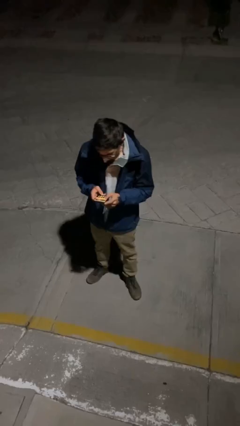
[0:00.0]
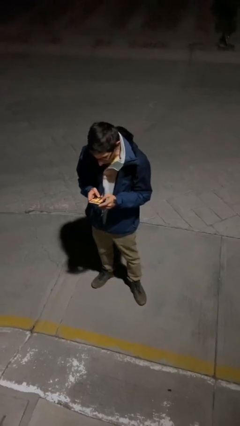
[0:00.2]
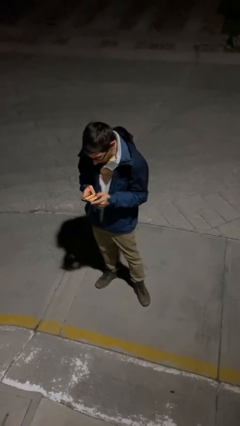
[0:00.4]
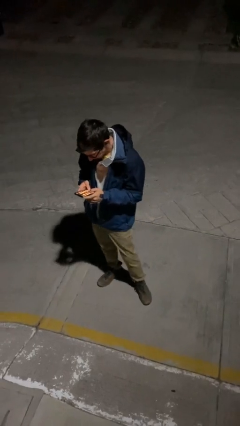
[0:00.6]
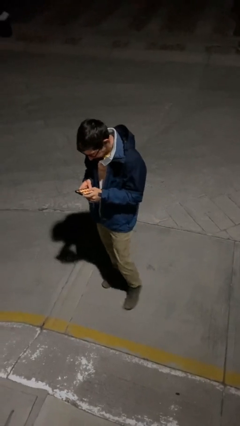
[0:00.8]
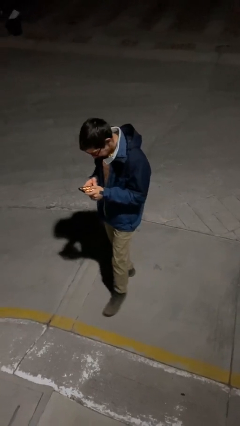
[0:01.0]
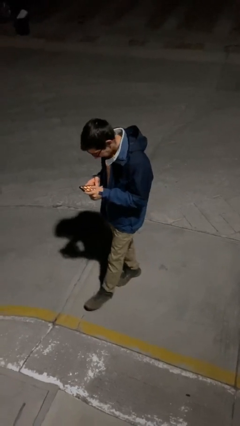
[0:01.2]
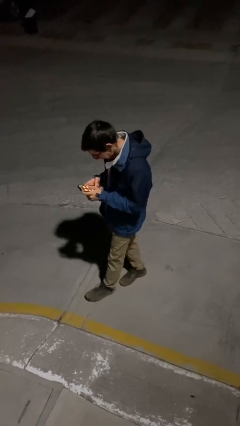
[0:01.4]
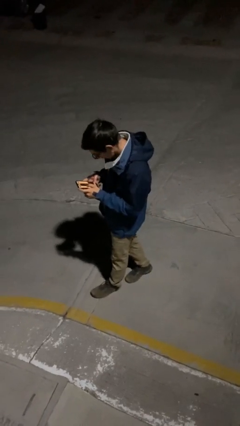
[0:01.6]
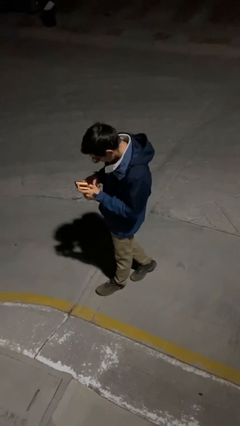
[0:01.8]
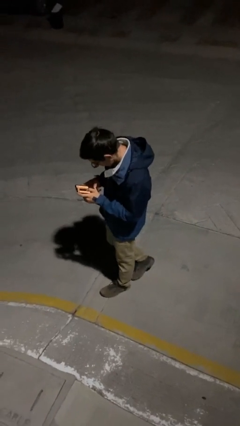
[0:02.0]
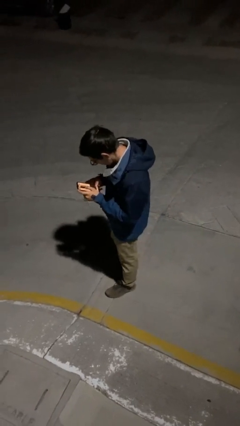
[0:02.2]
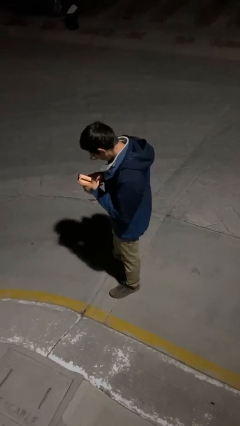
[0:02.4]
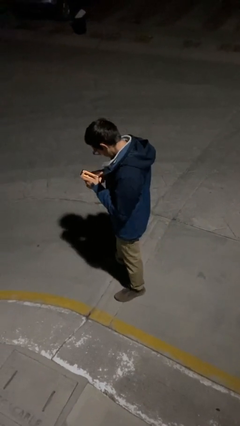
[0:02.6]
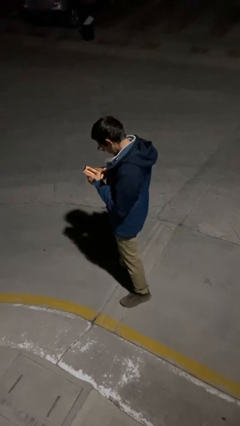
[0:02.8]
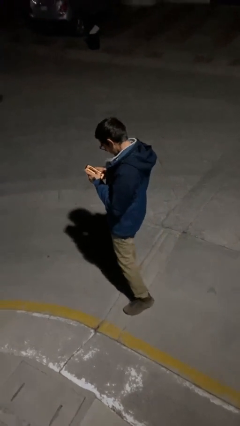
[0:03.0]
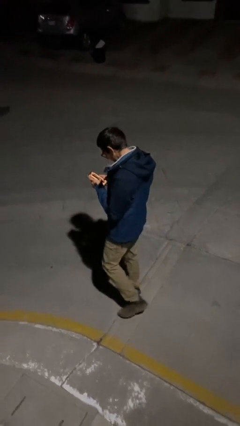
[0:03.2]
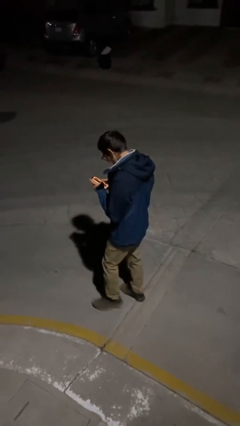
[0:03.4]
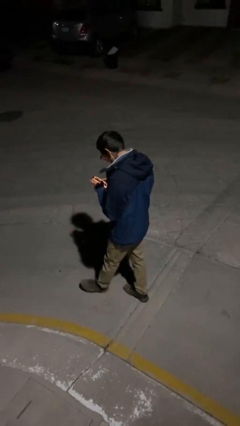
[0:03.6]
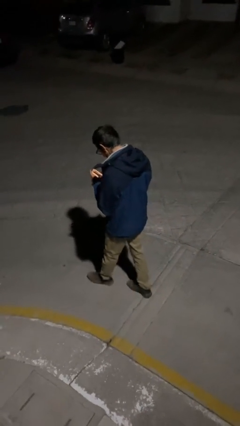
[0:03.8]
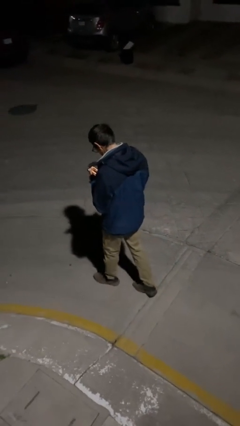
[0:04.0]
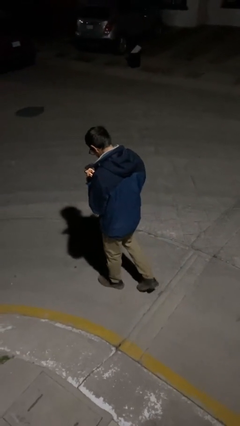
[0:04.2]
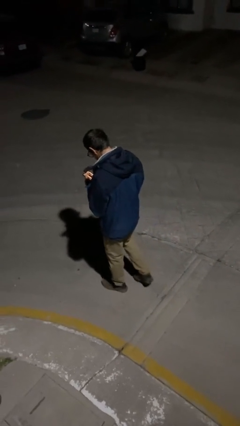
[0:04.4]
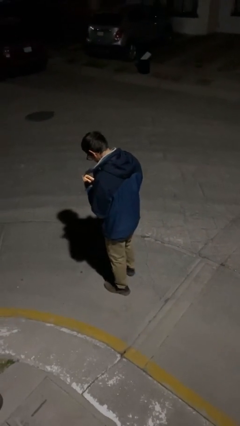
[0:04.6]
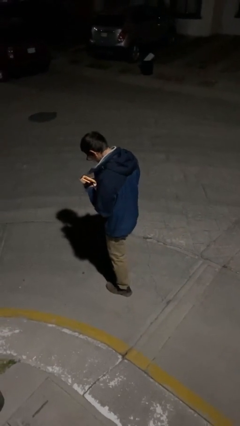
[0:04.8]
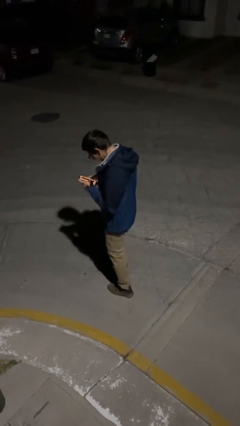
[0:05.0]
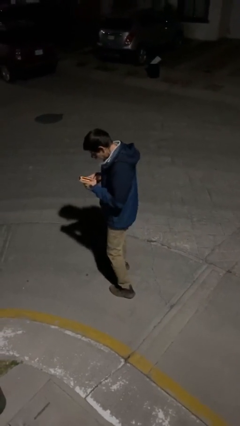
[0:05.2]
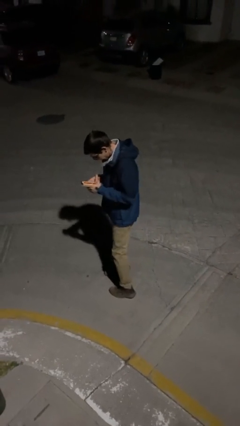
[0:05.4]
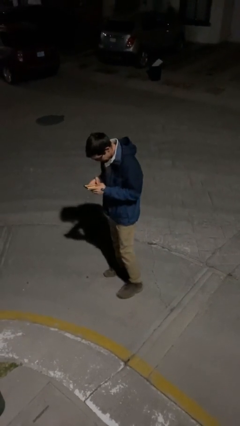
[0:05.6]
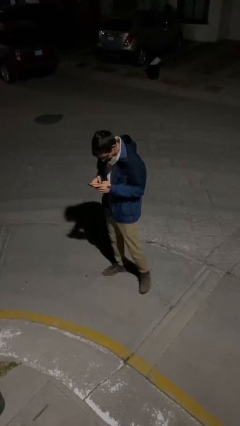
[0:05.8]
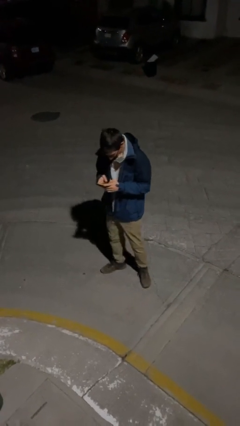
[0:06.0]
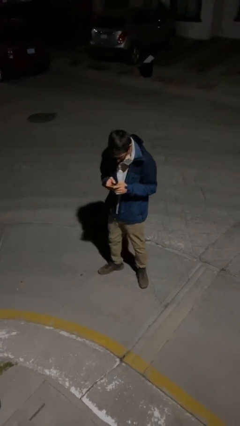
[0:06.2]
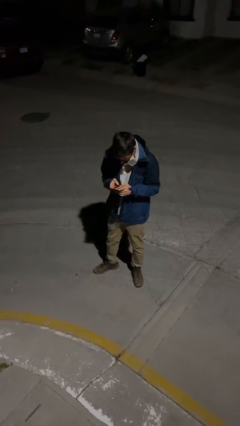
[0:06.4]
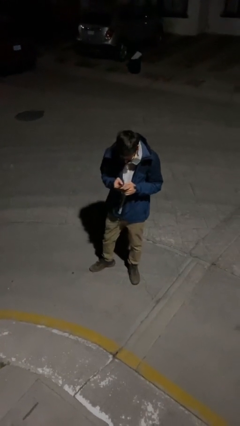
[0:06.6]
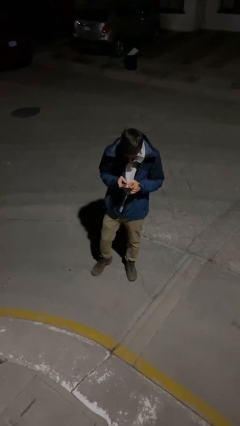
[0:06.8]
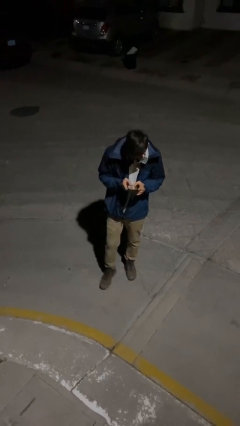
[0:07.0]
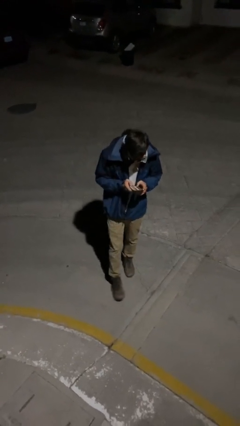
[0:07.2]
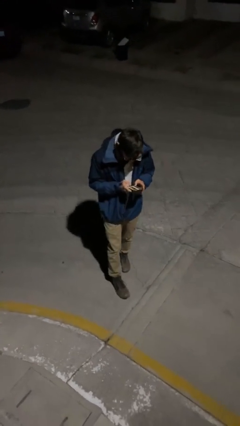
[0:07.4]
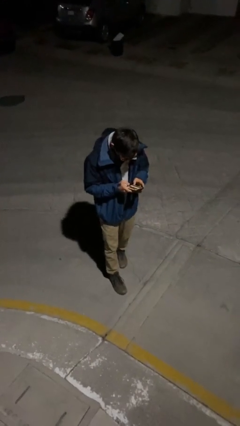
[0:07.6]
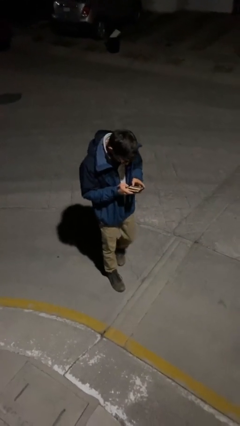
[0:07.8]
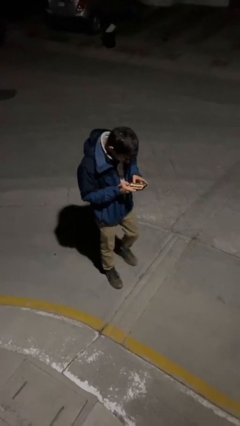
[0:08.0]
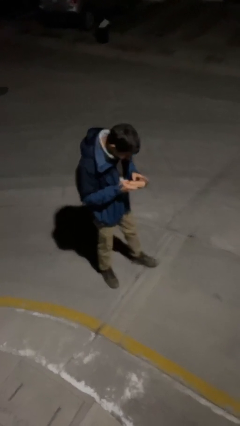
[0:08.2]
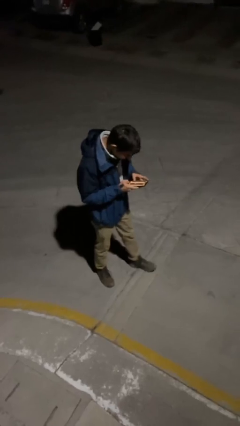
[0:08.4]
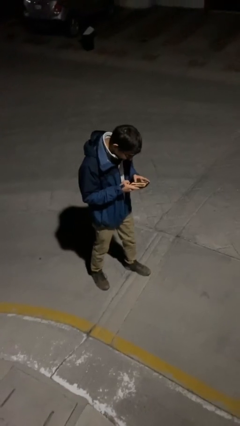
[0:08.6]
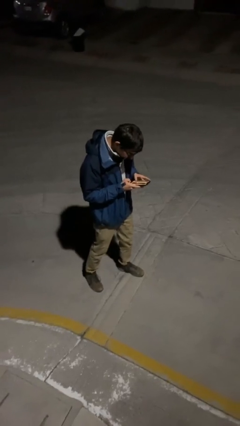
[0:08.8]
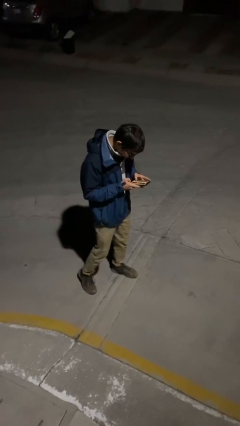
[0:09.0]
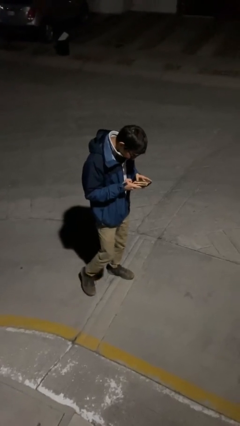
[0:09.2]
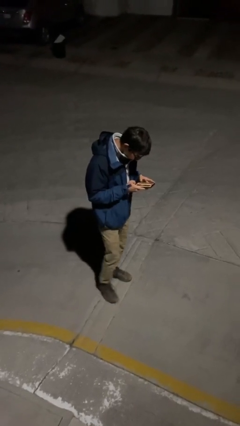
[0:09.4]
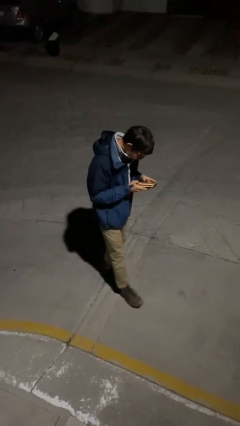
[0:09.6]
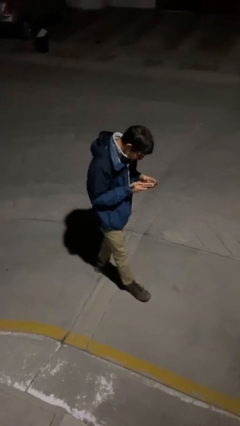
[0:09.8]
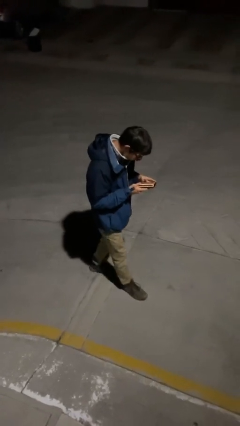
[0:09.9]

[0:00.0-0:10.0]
person texts on phone

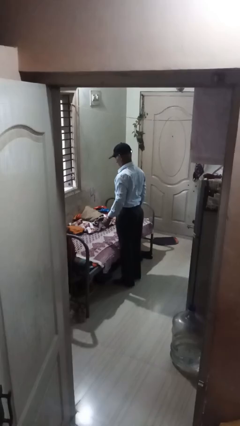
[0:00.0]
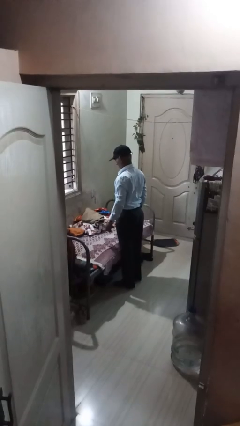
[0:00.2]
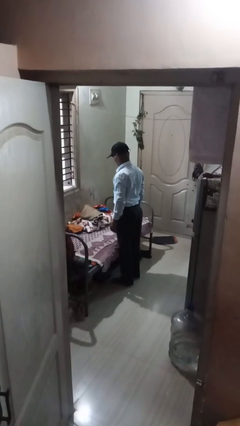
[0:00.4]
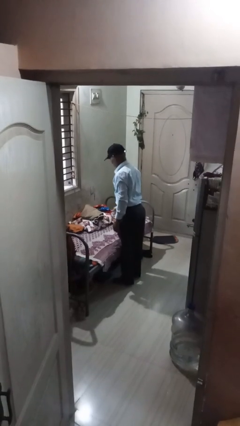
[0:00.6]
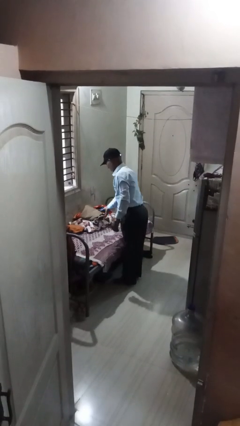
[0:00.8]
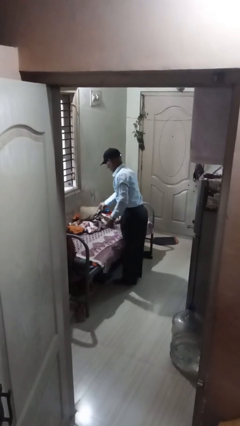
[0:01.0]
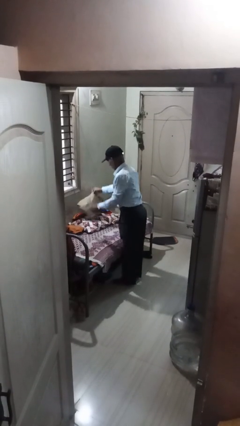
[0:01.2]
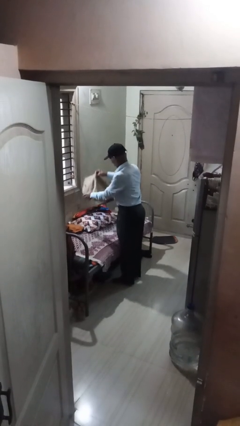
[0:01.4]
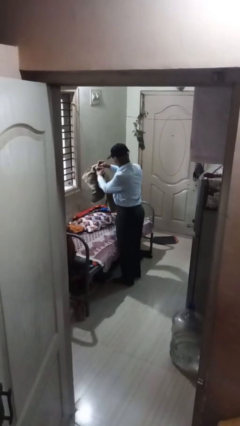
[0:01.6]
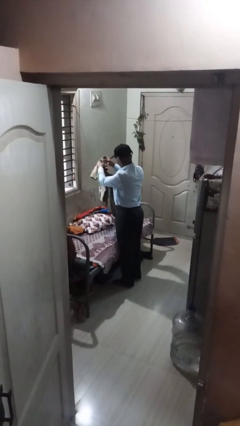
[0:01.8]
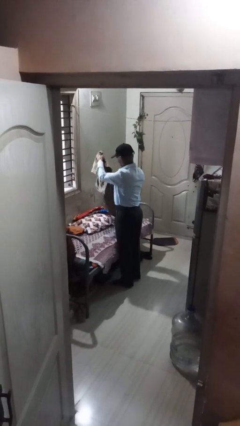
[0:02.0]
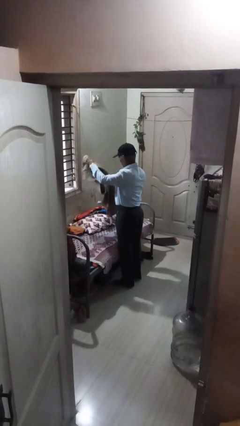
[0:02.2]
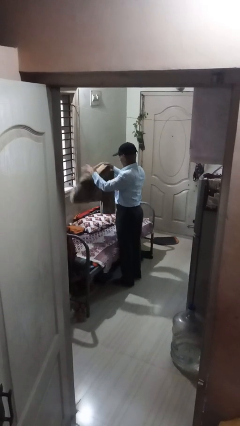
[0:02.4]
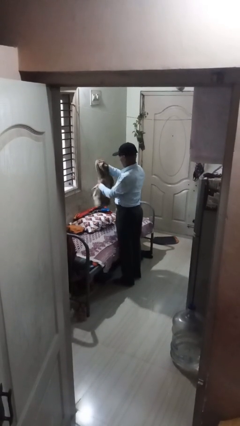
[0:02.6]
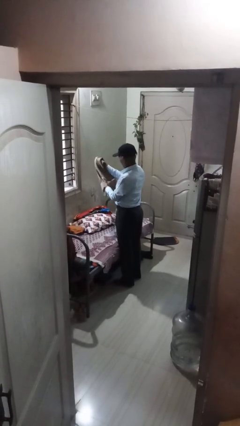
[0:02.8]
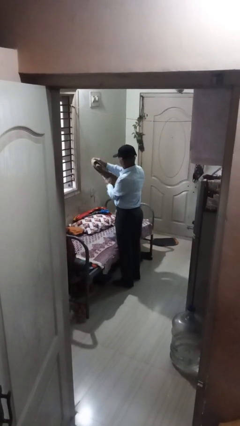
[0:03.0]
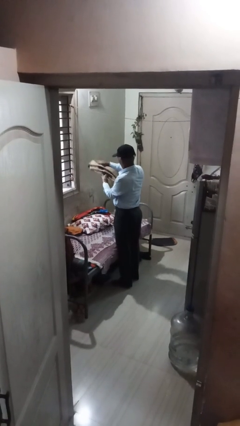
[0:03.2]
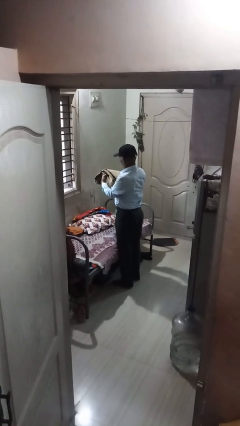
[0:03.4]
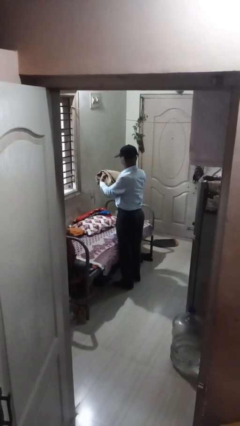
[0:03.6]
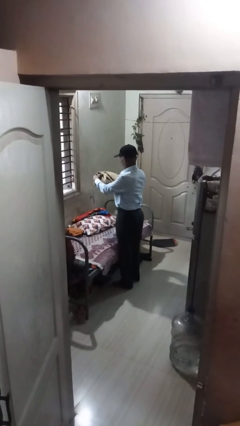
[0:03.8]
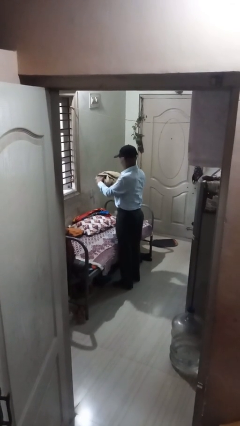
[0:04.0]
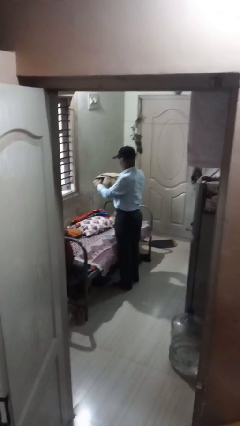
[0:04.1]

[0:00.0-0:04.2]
person folds pants

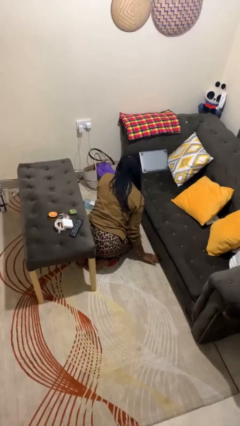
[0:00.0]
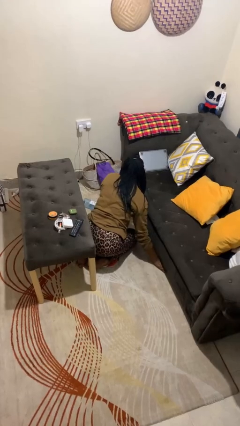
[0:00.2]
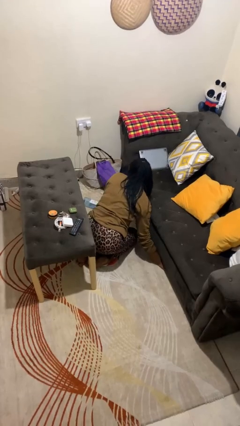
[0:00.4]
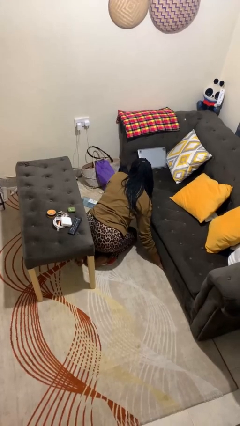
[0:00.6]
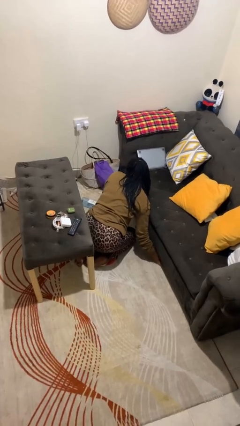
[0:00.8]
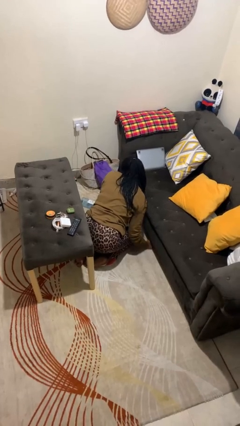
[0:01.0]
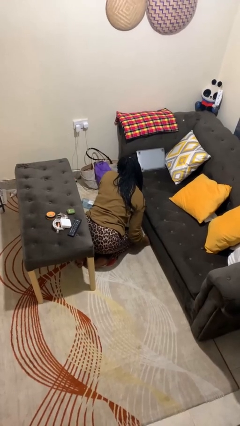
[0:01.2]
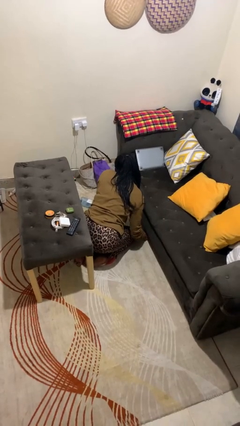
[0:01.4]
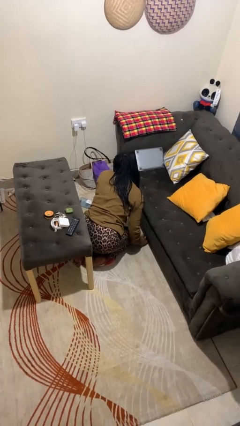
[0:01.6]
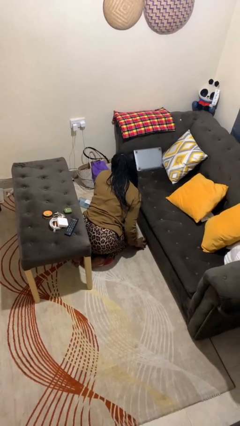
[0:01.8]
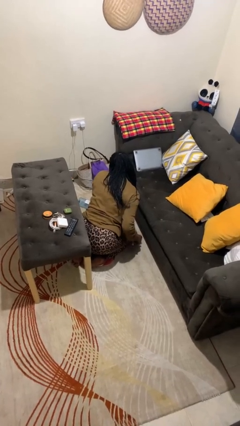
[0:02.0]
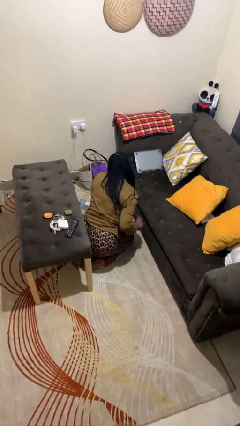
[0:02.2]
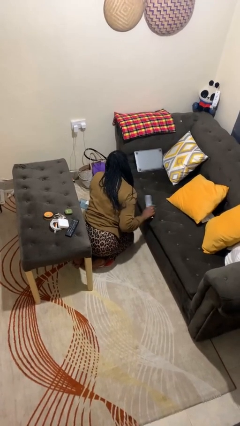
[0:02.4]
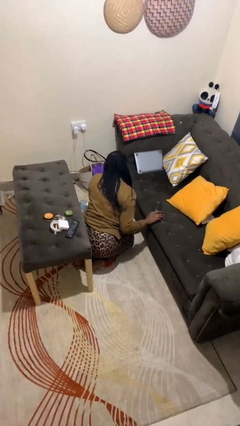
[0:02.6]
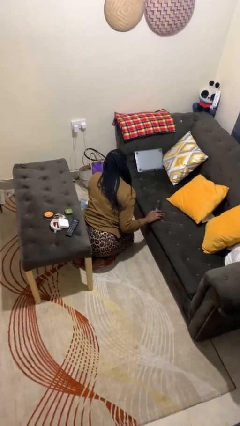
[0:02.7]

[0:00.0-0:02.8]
person searches under couch

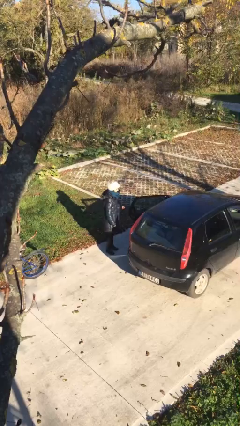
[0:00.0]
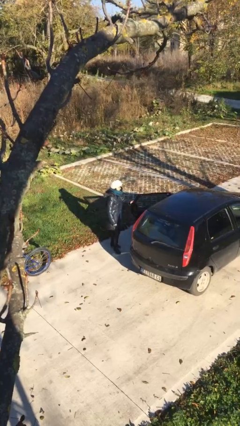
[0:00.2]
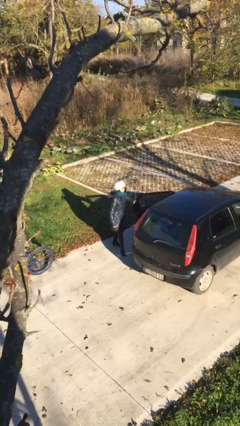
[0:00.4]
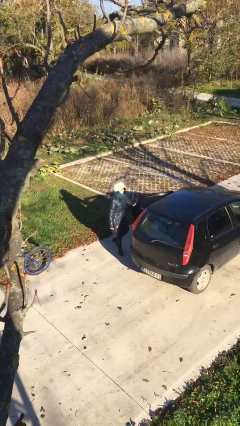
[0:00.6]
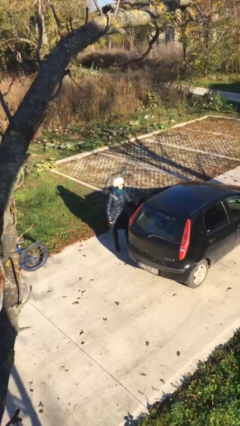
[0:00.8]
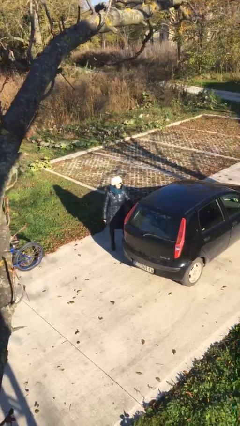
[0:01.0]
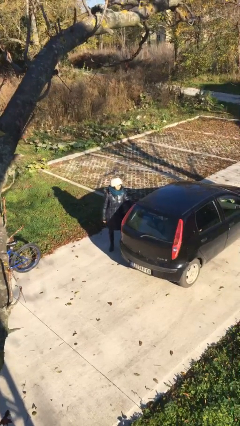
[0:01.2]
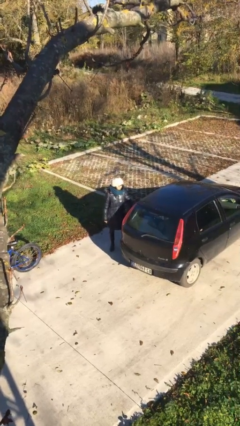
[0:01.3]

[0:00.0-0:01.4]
person closes car door
